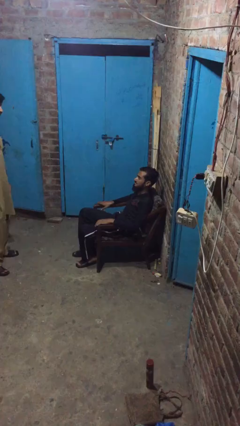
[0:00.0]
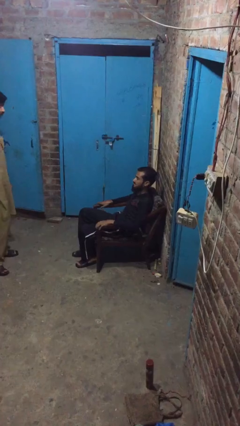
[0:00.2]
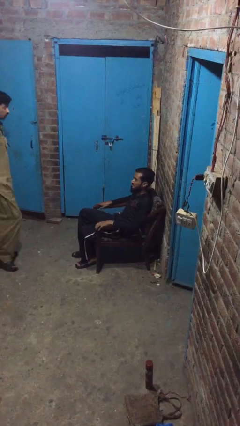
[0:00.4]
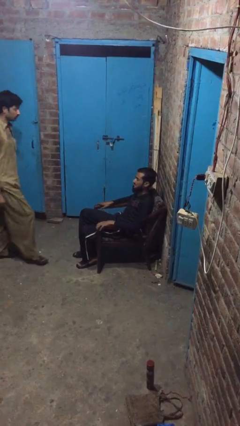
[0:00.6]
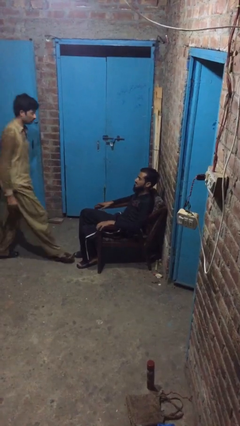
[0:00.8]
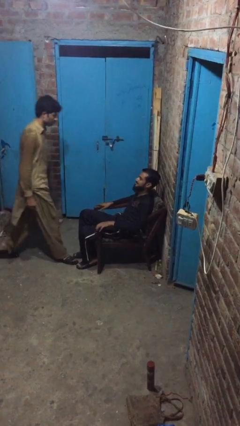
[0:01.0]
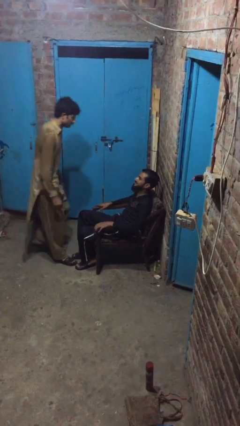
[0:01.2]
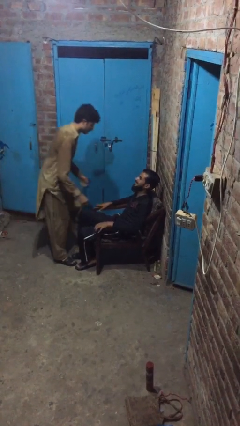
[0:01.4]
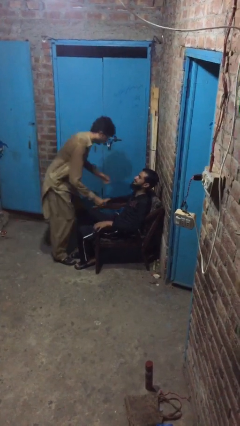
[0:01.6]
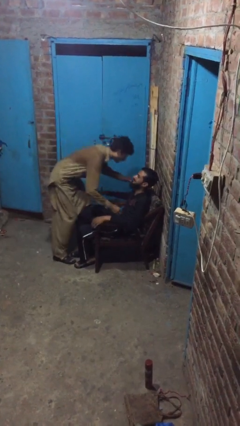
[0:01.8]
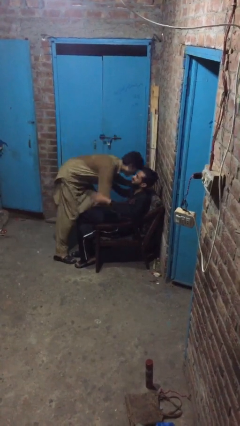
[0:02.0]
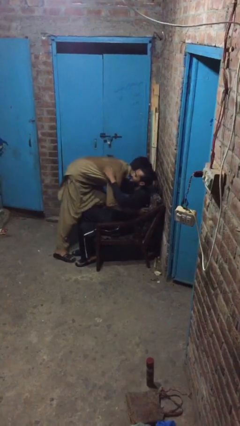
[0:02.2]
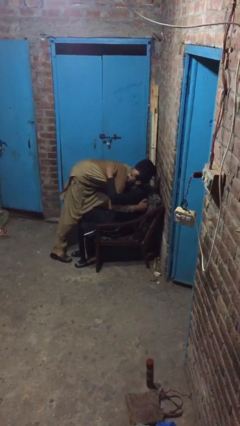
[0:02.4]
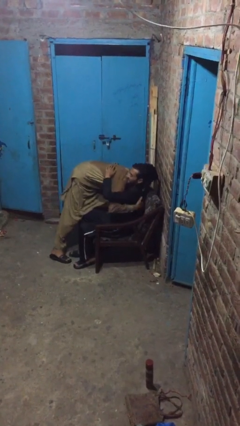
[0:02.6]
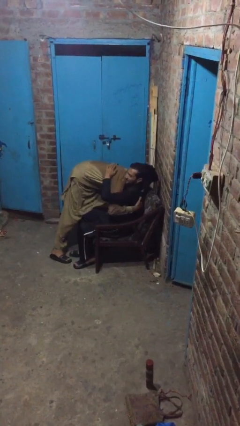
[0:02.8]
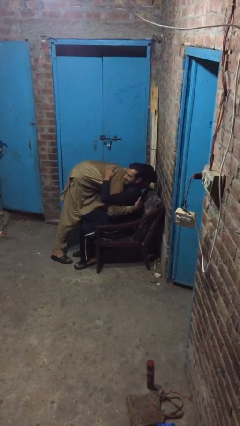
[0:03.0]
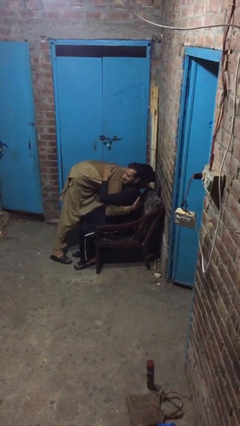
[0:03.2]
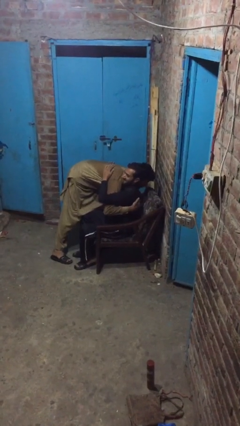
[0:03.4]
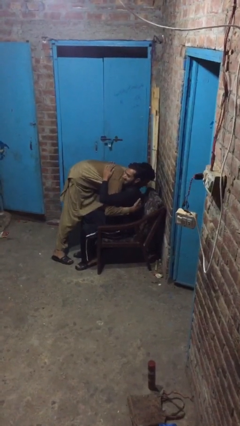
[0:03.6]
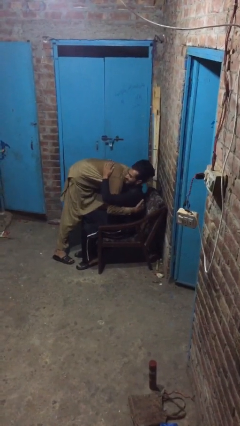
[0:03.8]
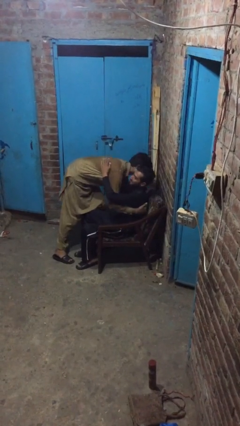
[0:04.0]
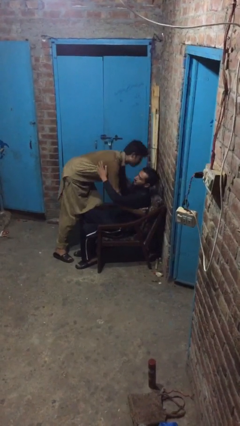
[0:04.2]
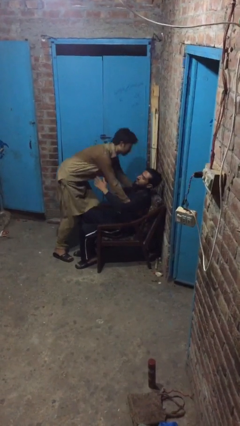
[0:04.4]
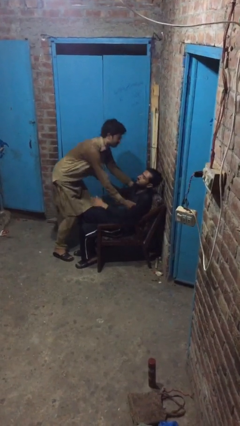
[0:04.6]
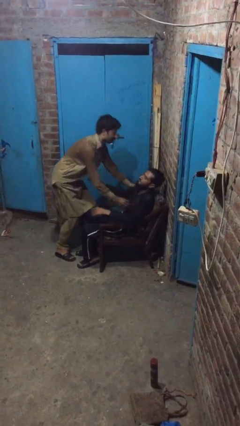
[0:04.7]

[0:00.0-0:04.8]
person embraces person

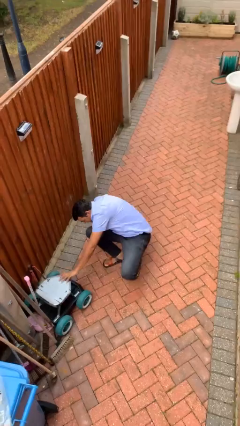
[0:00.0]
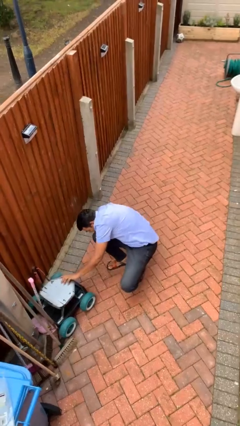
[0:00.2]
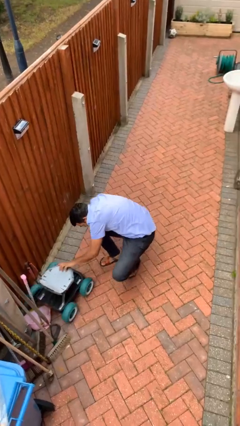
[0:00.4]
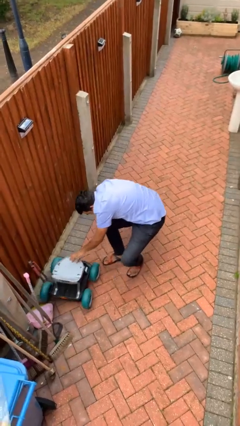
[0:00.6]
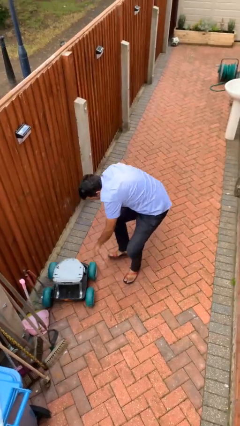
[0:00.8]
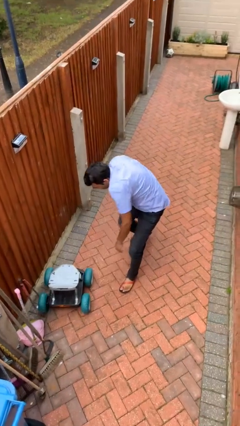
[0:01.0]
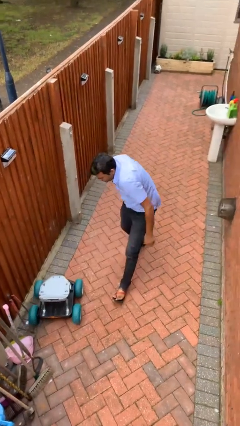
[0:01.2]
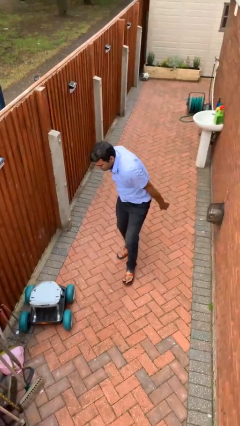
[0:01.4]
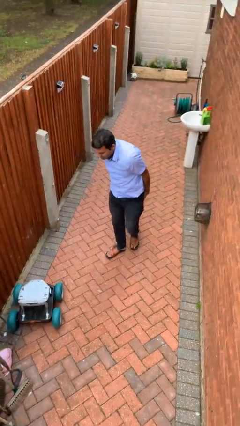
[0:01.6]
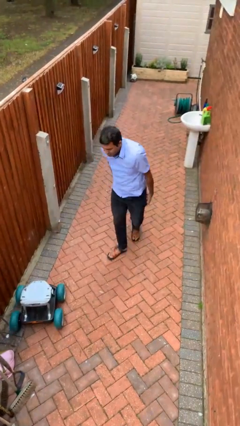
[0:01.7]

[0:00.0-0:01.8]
person stands up from floor

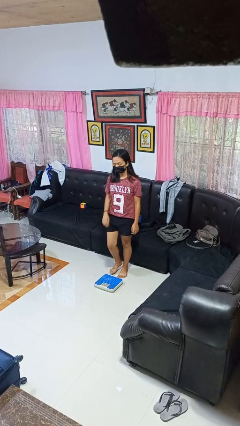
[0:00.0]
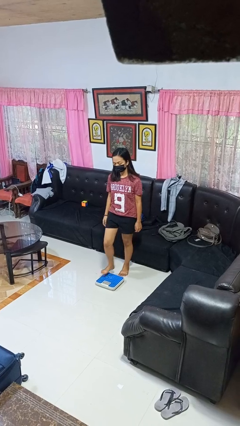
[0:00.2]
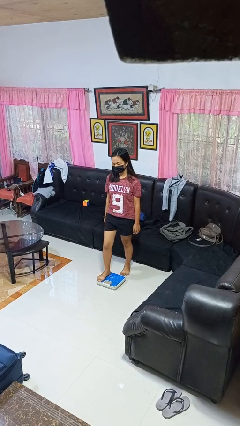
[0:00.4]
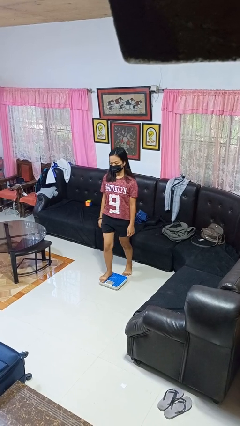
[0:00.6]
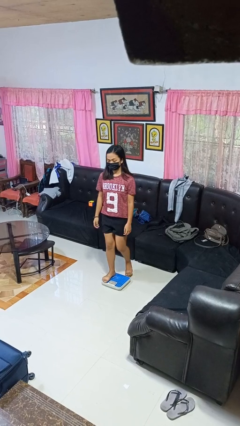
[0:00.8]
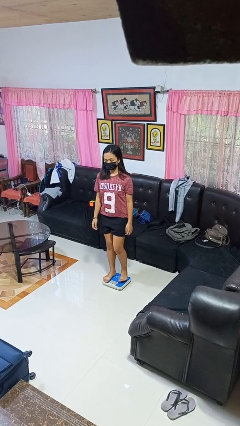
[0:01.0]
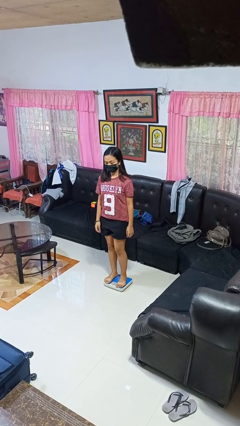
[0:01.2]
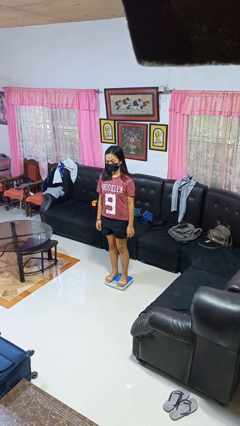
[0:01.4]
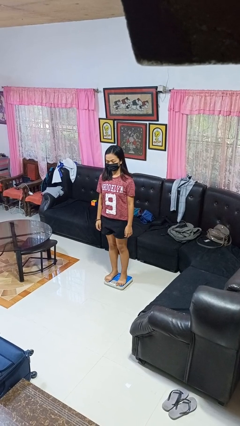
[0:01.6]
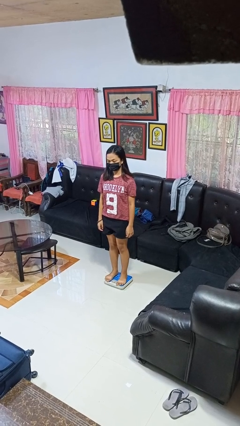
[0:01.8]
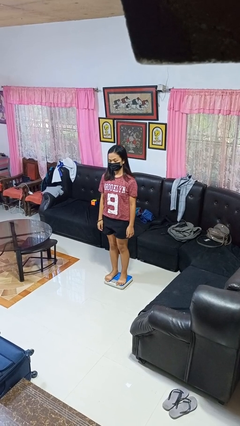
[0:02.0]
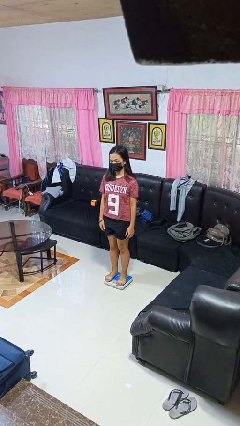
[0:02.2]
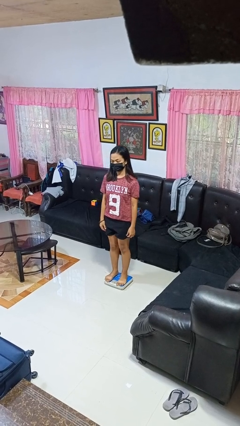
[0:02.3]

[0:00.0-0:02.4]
person uses bodyweight scale

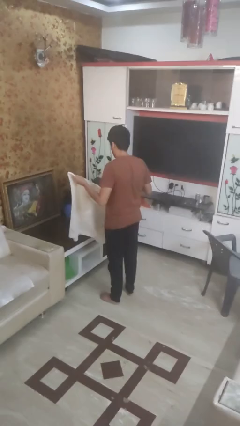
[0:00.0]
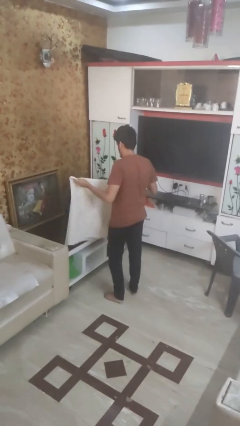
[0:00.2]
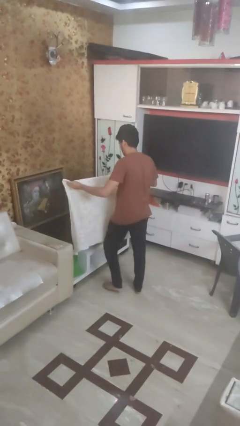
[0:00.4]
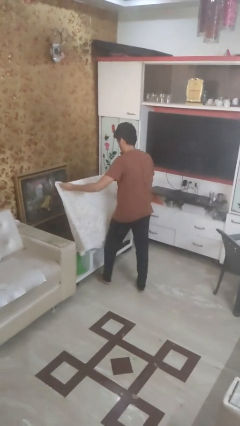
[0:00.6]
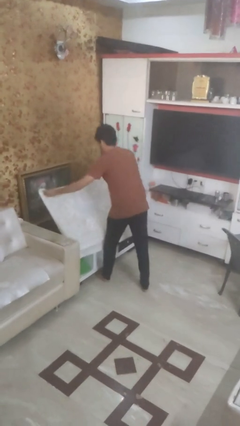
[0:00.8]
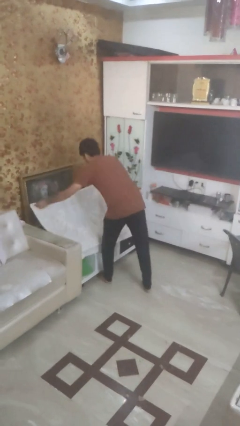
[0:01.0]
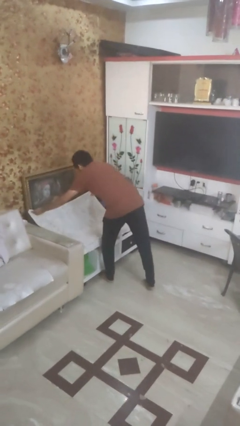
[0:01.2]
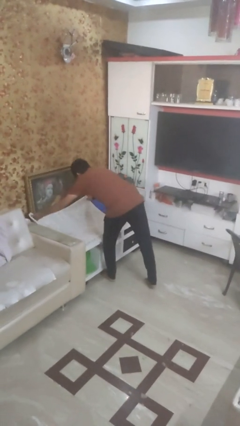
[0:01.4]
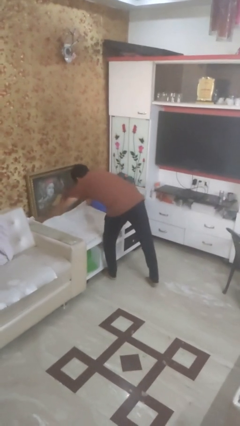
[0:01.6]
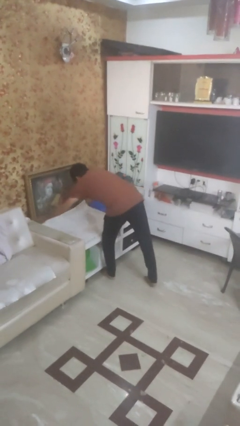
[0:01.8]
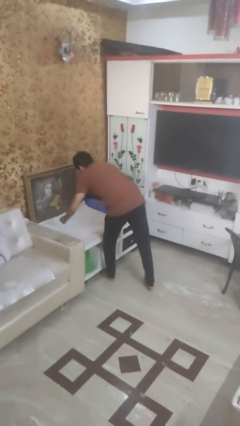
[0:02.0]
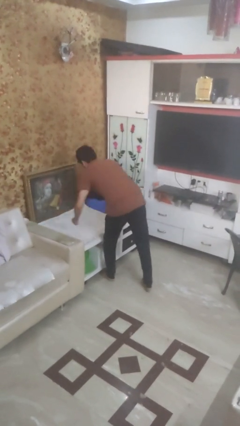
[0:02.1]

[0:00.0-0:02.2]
person spreads tablecloth

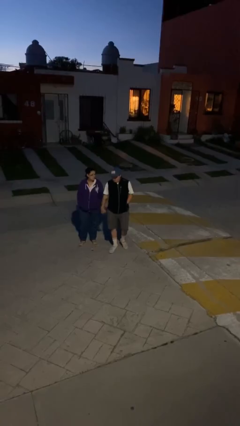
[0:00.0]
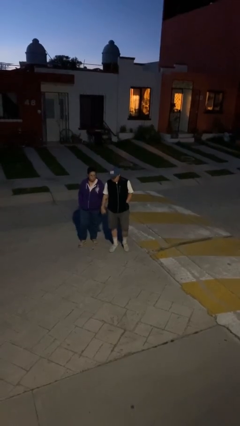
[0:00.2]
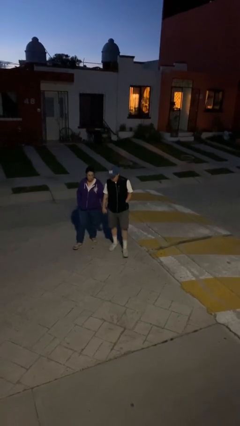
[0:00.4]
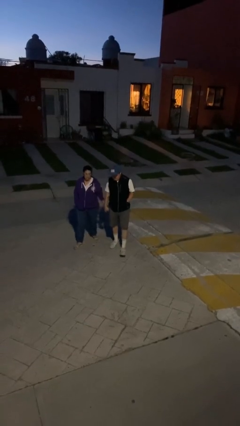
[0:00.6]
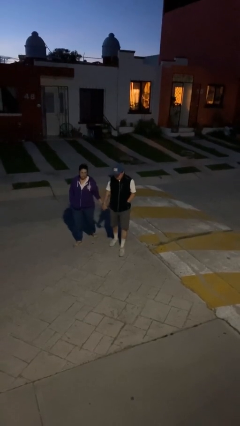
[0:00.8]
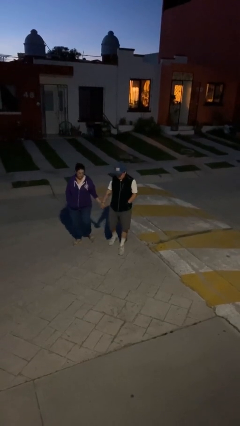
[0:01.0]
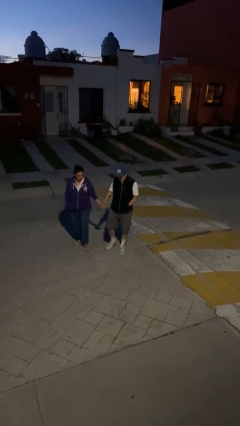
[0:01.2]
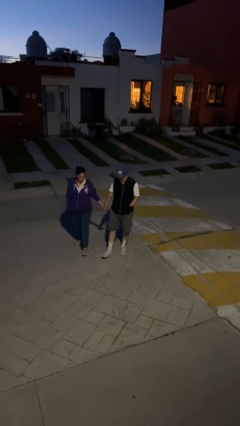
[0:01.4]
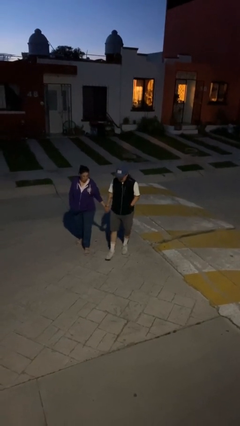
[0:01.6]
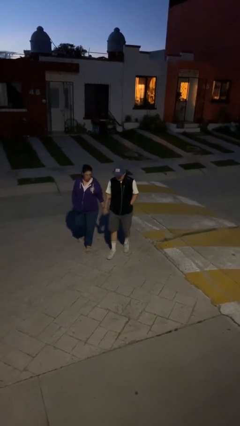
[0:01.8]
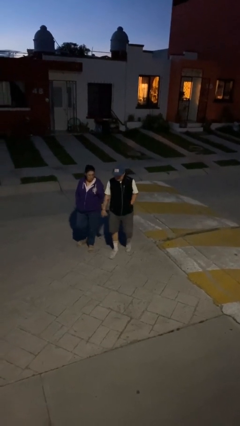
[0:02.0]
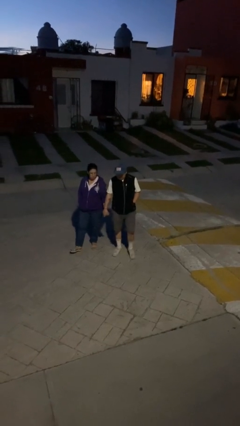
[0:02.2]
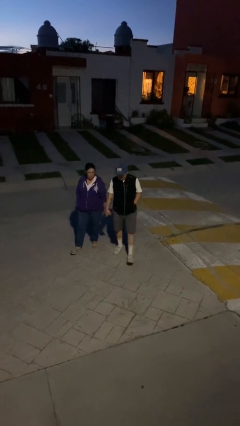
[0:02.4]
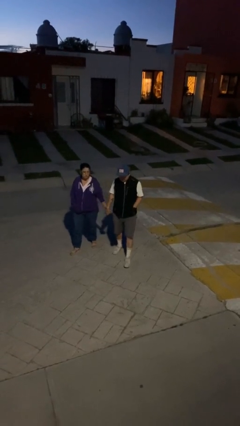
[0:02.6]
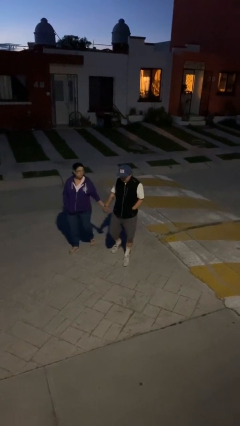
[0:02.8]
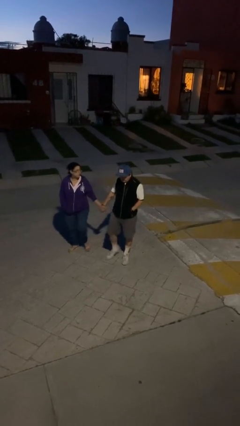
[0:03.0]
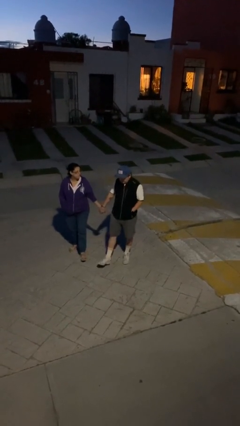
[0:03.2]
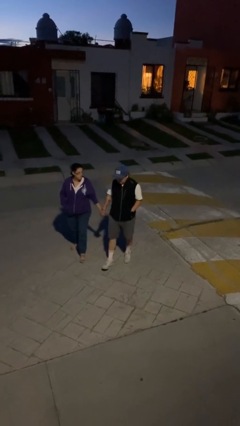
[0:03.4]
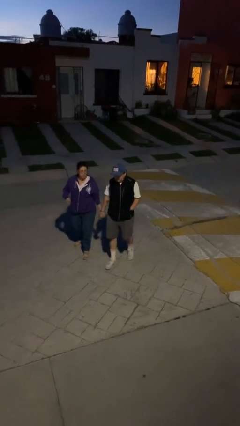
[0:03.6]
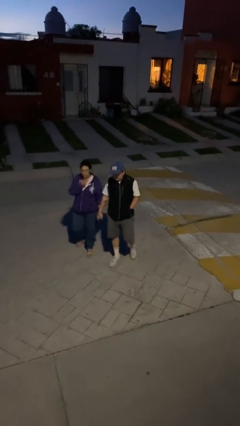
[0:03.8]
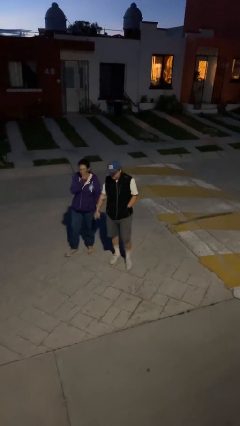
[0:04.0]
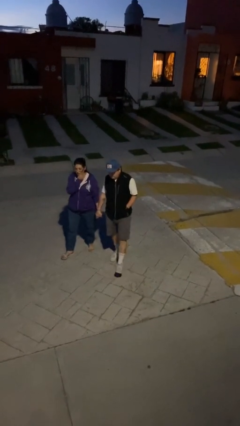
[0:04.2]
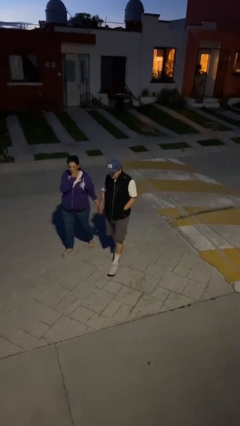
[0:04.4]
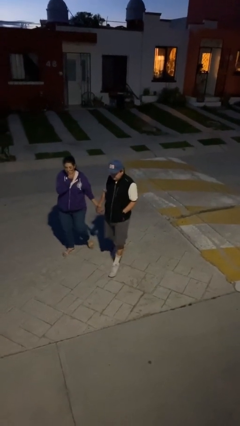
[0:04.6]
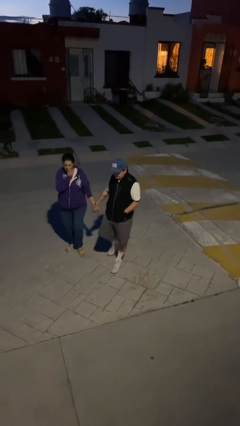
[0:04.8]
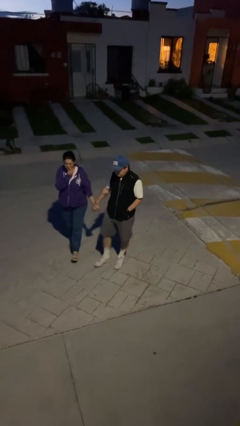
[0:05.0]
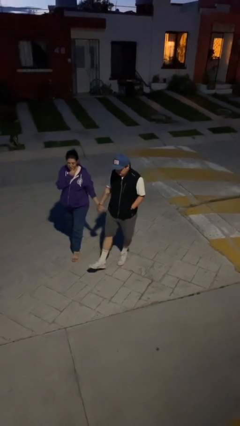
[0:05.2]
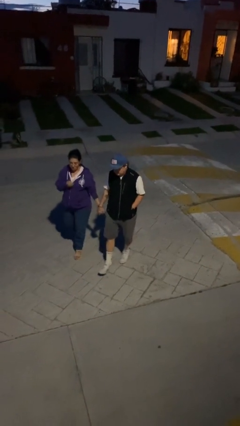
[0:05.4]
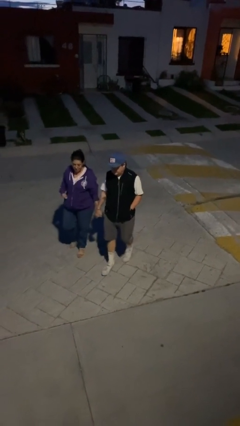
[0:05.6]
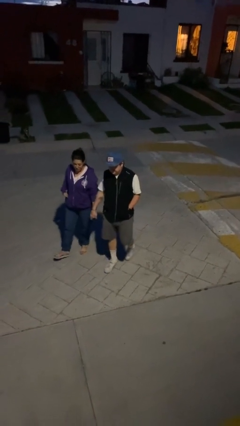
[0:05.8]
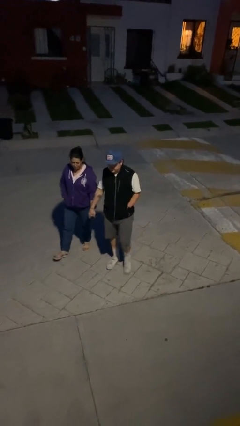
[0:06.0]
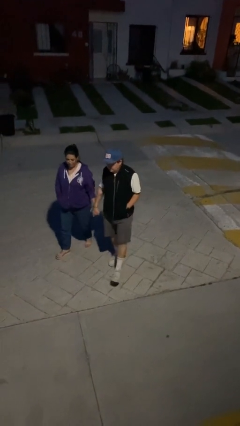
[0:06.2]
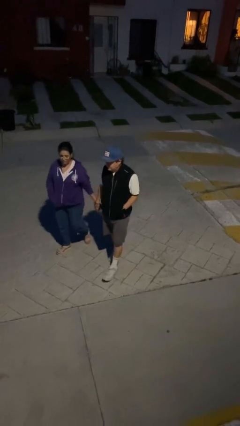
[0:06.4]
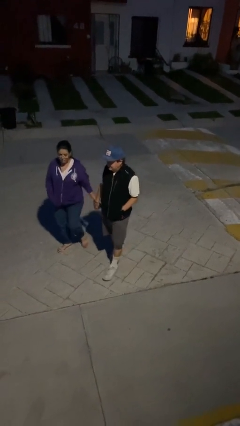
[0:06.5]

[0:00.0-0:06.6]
person holds hand

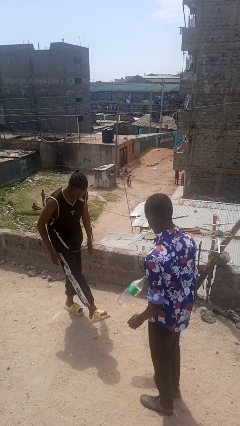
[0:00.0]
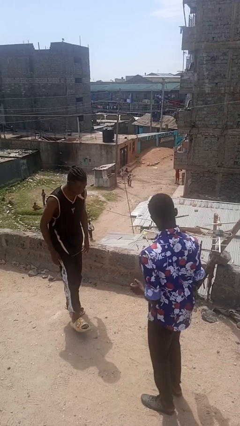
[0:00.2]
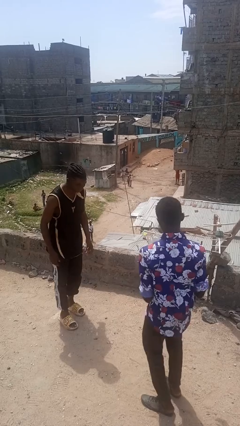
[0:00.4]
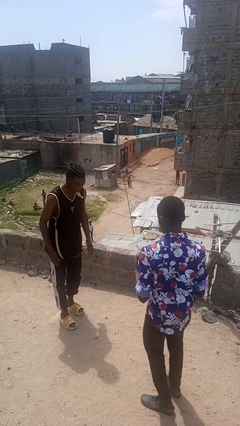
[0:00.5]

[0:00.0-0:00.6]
person kicks object to person
